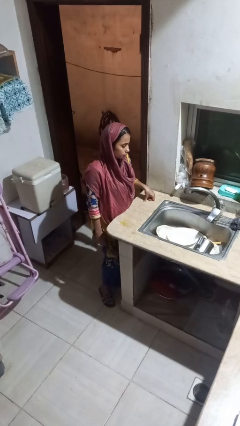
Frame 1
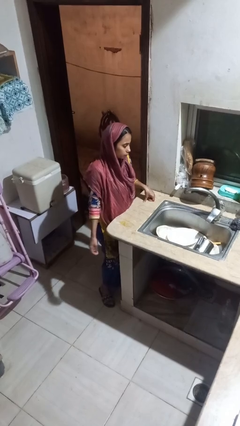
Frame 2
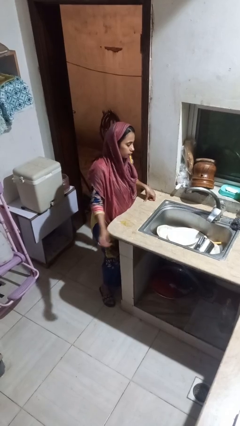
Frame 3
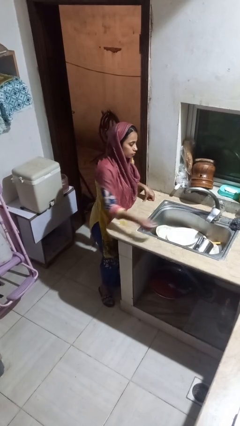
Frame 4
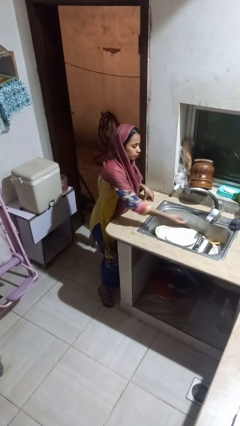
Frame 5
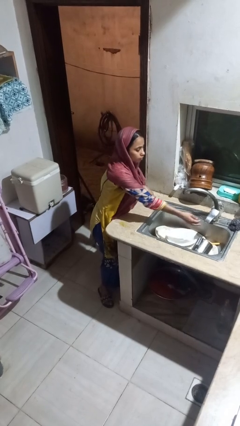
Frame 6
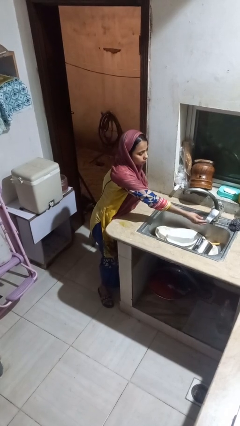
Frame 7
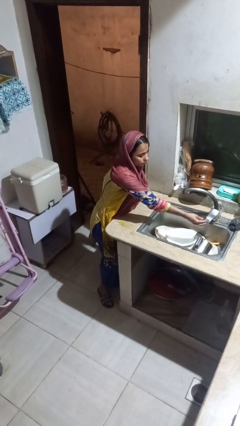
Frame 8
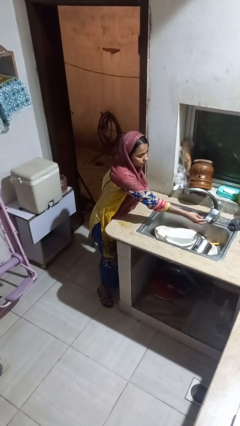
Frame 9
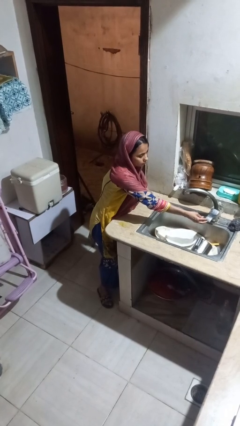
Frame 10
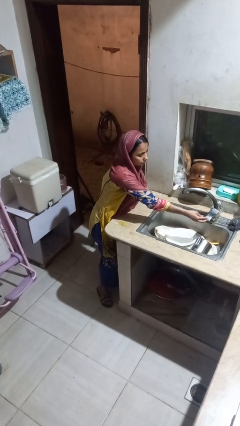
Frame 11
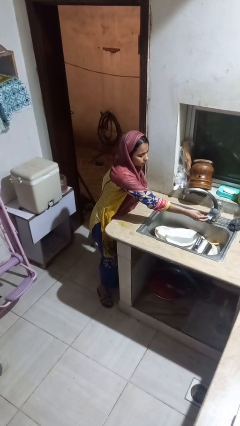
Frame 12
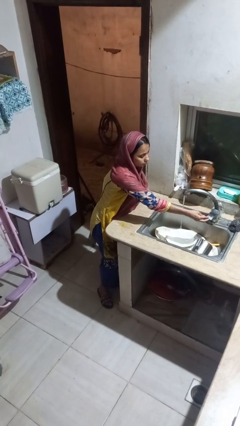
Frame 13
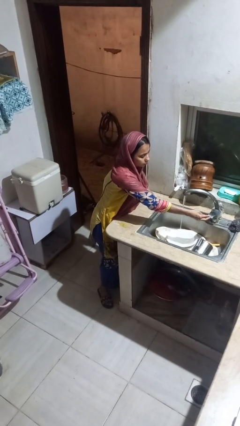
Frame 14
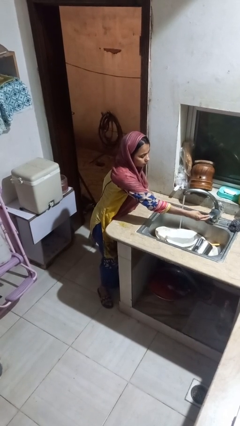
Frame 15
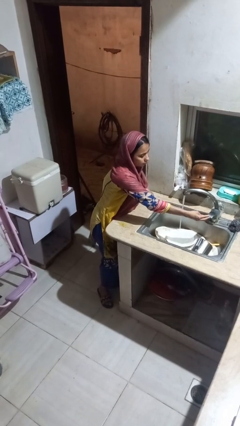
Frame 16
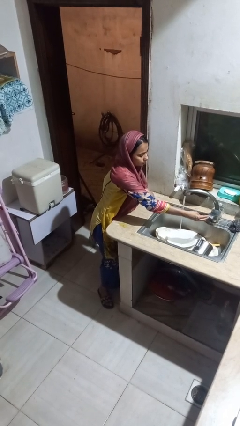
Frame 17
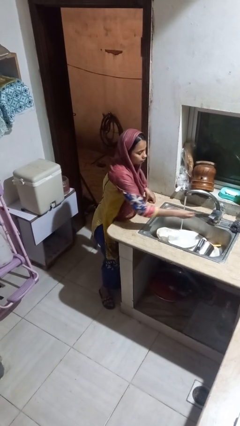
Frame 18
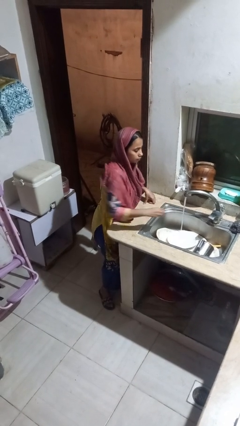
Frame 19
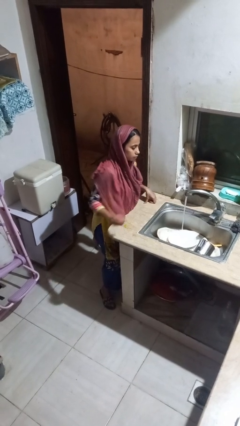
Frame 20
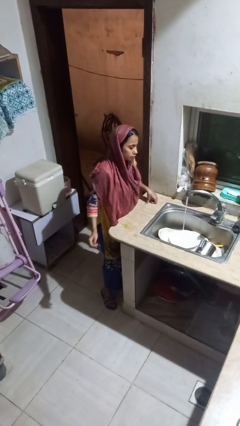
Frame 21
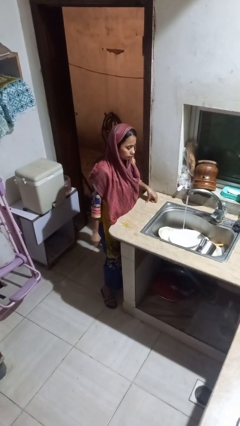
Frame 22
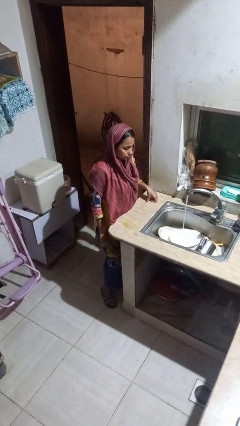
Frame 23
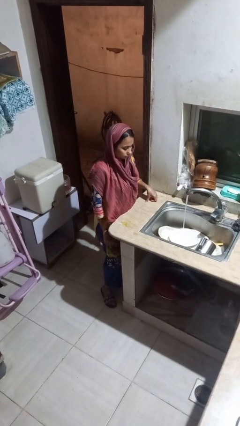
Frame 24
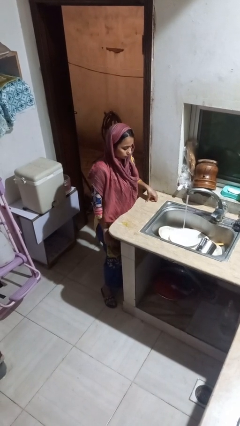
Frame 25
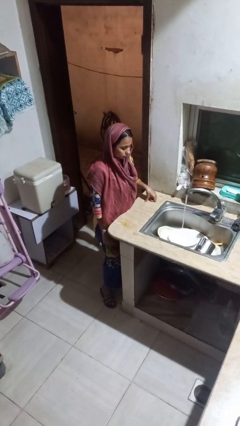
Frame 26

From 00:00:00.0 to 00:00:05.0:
person turns on faucet

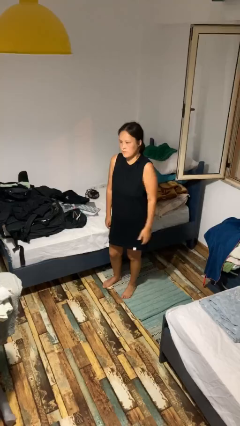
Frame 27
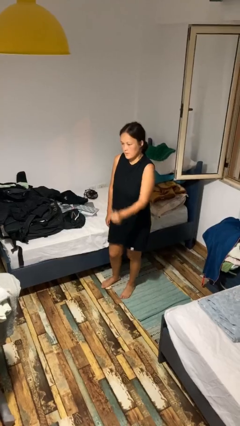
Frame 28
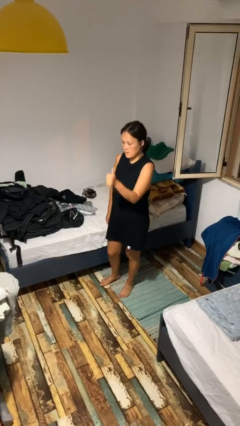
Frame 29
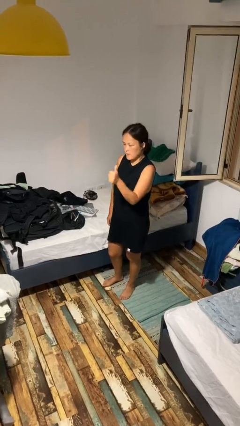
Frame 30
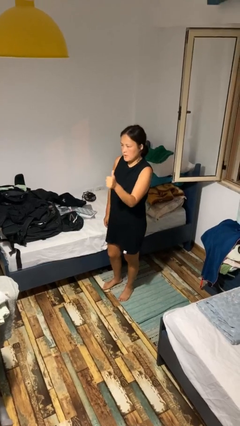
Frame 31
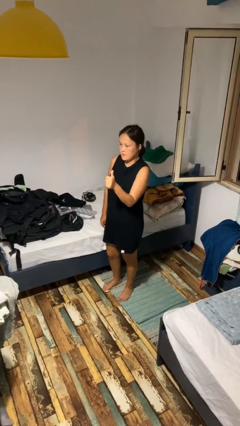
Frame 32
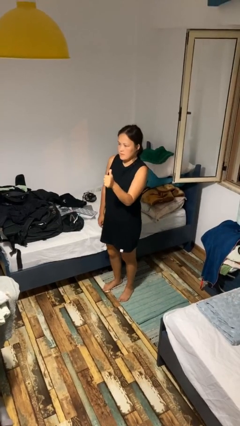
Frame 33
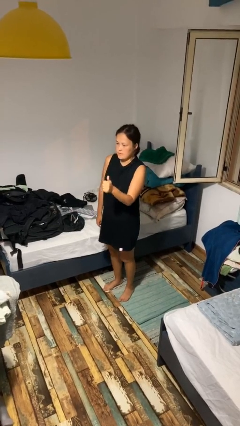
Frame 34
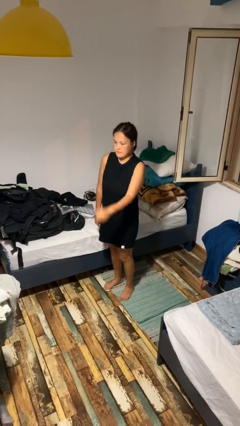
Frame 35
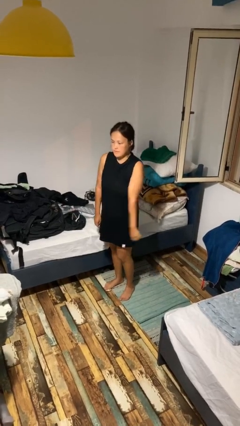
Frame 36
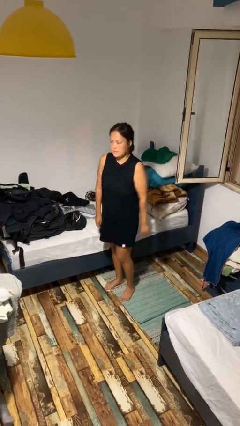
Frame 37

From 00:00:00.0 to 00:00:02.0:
person gestures thumbs up

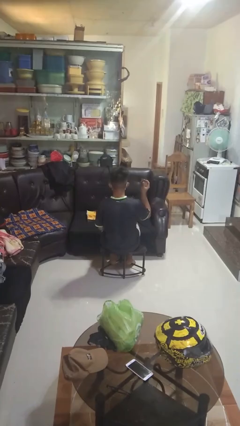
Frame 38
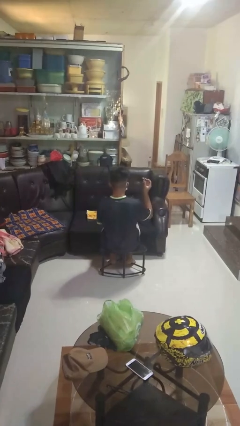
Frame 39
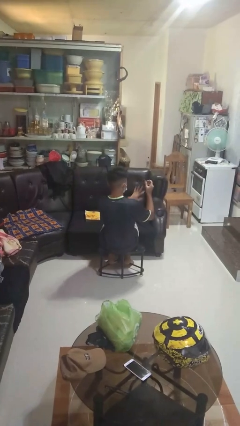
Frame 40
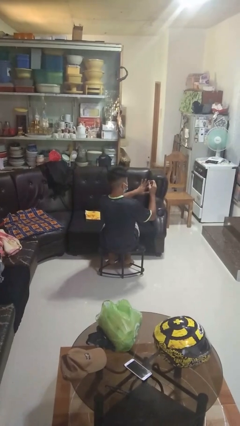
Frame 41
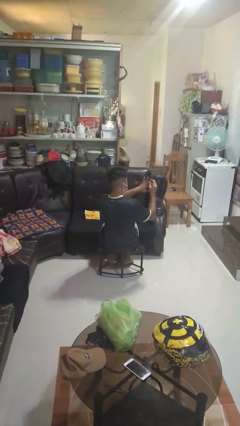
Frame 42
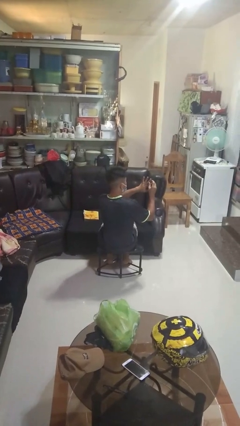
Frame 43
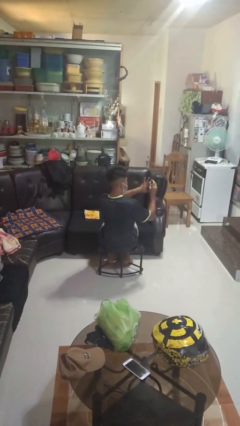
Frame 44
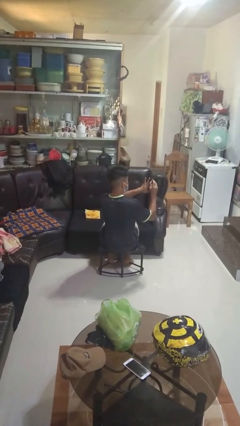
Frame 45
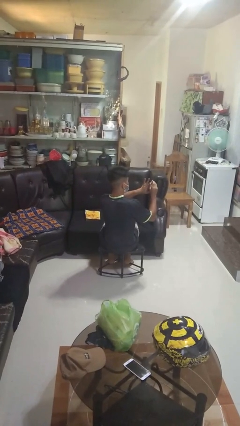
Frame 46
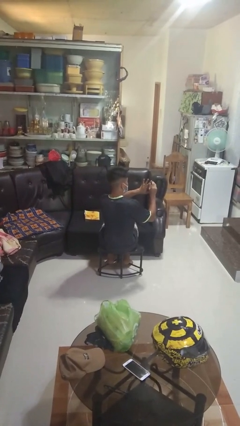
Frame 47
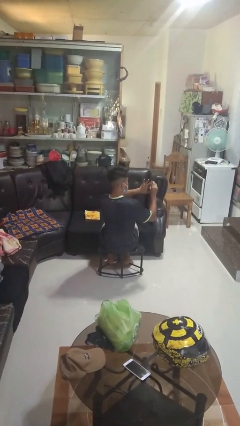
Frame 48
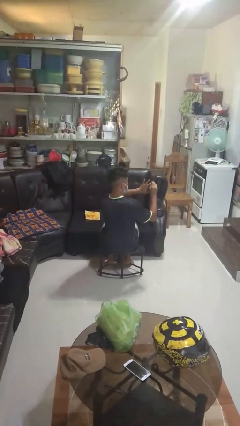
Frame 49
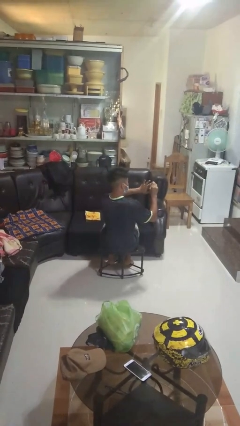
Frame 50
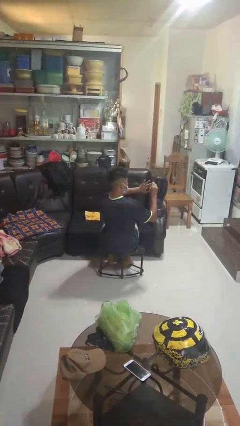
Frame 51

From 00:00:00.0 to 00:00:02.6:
person clips fingernails

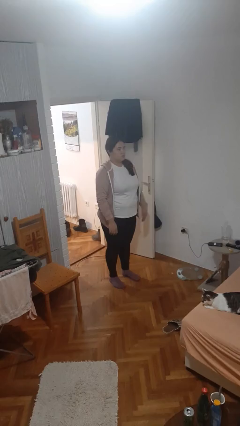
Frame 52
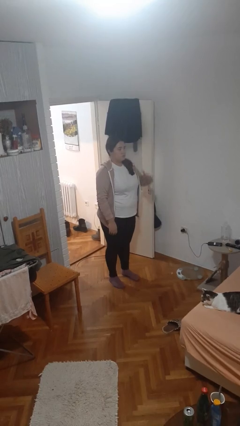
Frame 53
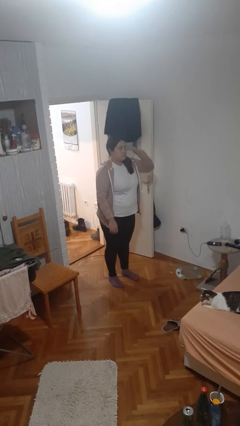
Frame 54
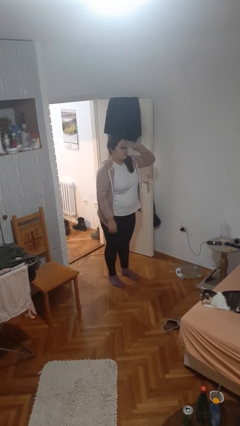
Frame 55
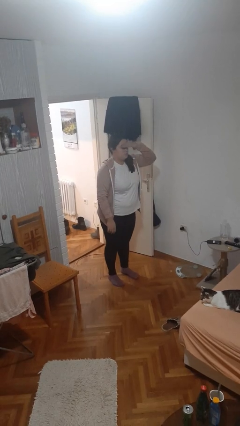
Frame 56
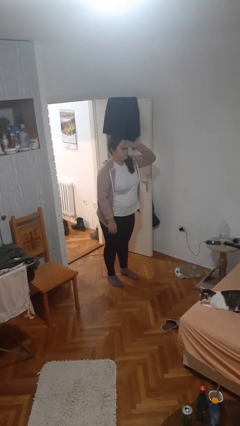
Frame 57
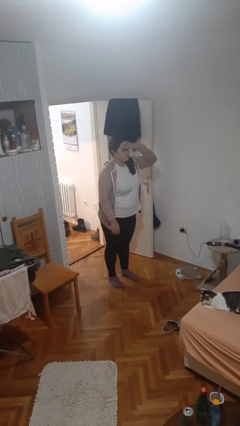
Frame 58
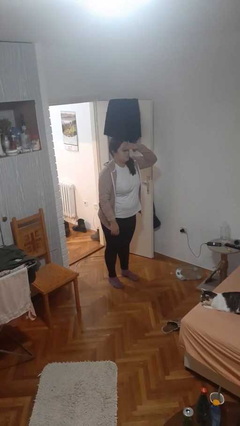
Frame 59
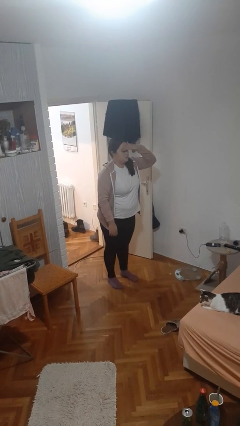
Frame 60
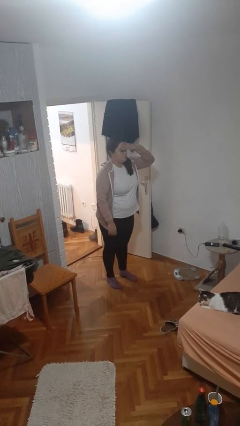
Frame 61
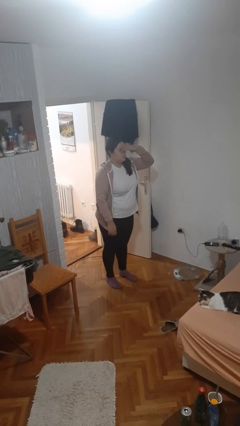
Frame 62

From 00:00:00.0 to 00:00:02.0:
person shades eyes

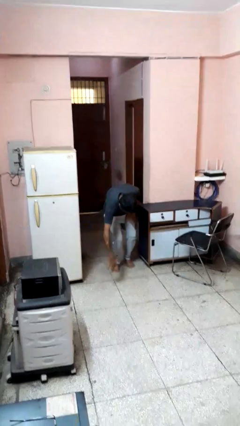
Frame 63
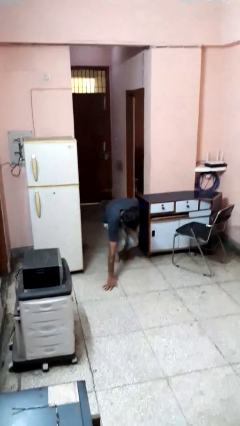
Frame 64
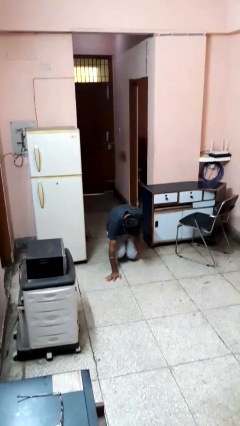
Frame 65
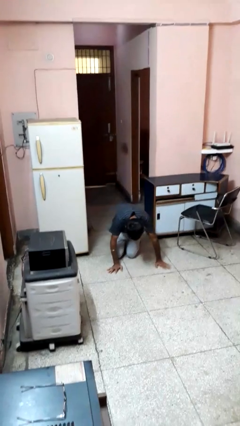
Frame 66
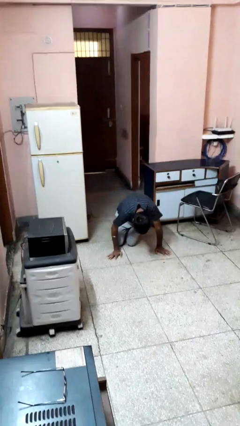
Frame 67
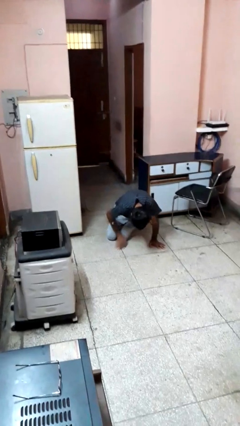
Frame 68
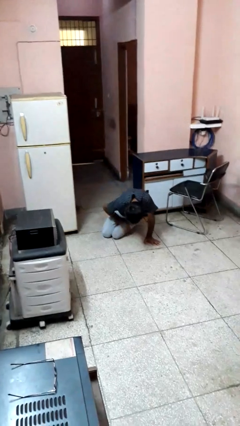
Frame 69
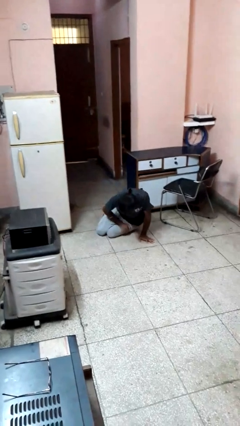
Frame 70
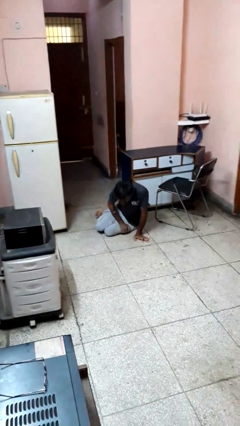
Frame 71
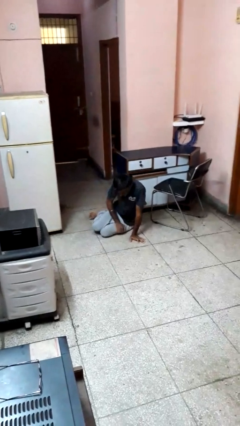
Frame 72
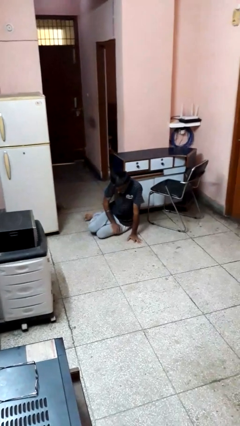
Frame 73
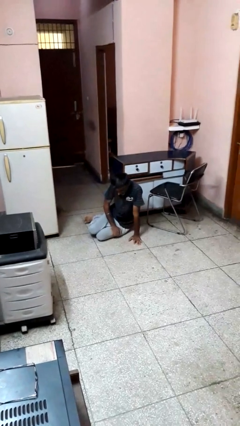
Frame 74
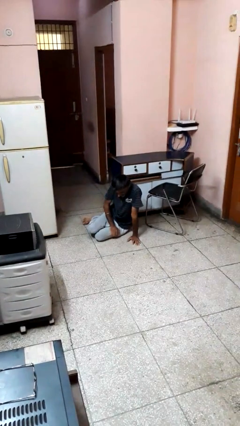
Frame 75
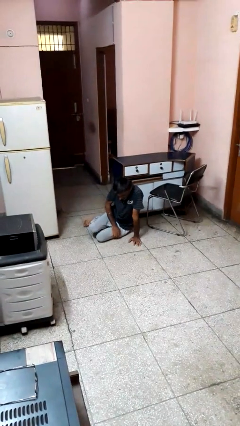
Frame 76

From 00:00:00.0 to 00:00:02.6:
person lies down on floor

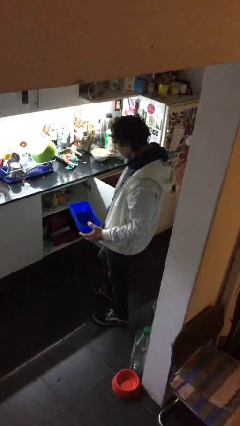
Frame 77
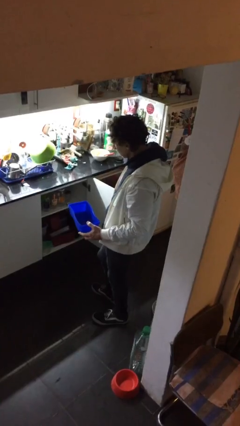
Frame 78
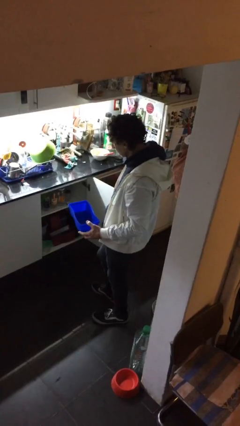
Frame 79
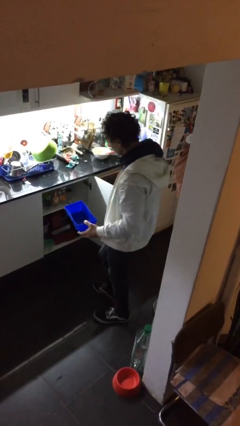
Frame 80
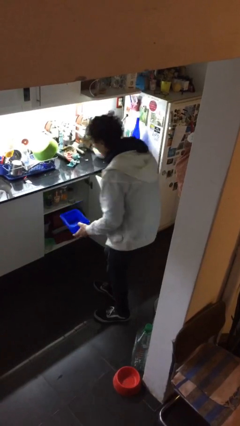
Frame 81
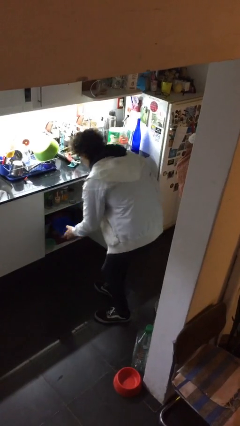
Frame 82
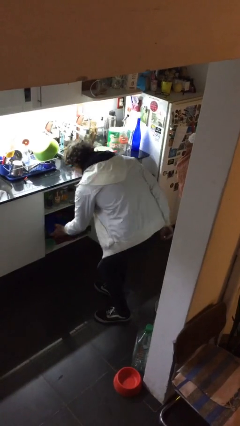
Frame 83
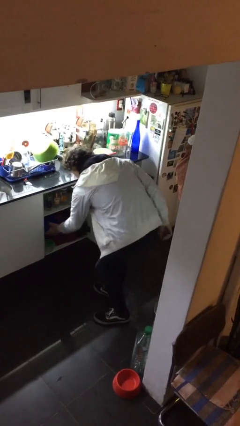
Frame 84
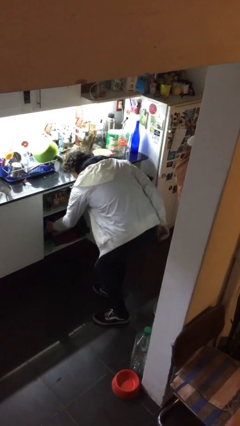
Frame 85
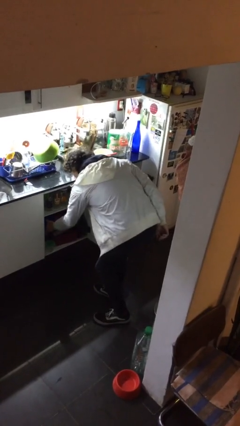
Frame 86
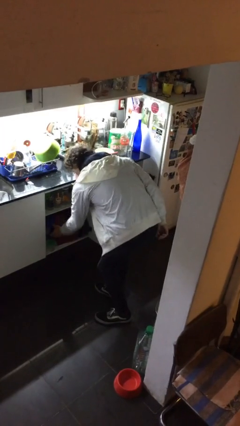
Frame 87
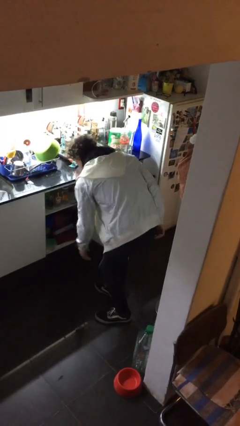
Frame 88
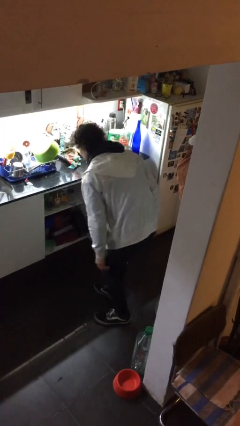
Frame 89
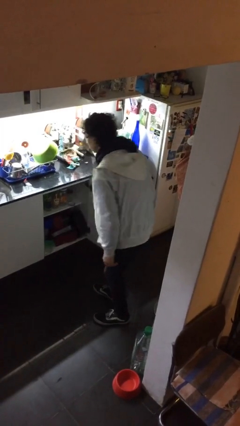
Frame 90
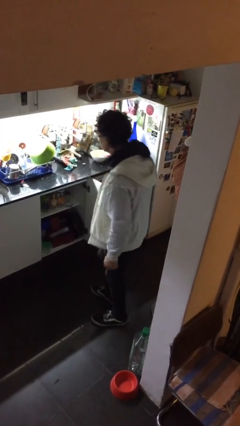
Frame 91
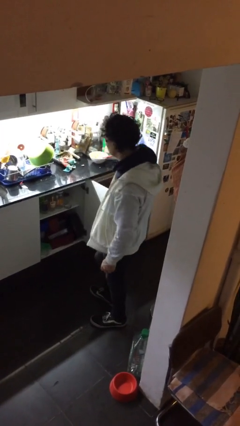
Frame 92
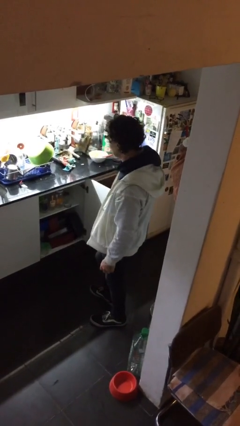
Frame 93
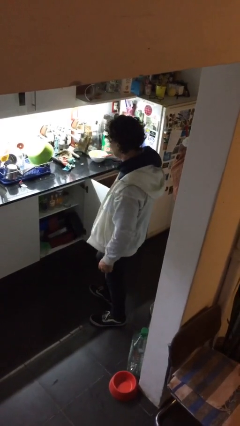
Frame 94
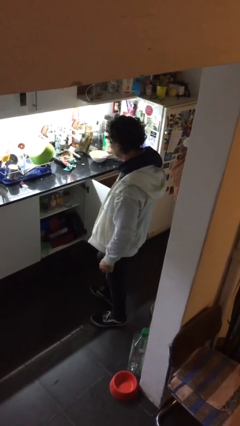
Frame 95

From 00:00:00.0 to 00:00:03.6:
person puts down object into cabinet
